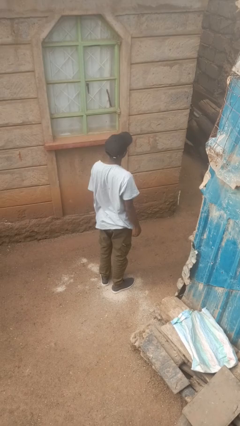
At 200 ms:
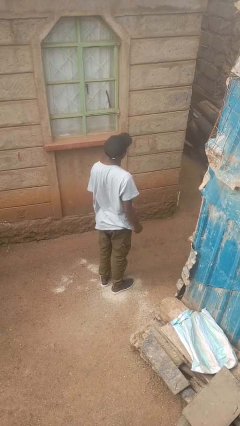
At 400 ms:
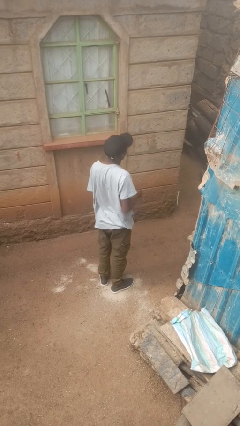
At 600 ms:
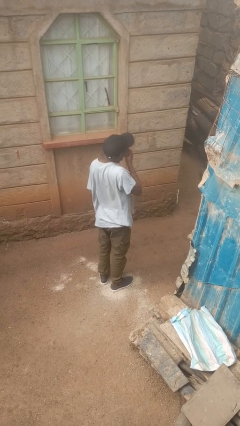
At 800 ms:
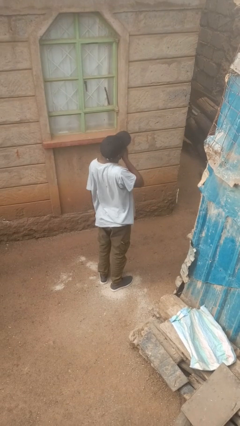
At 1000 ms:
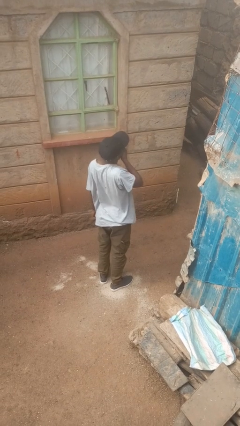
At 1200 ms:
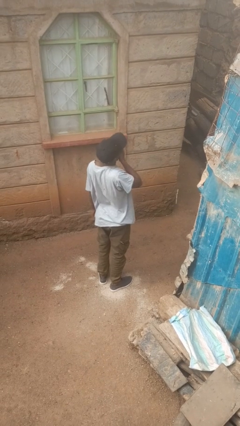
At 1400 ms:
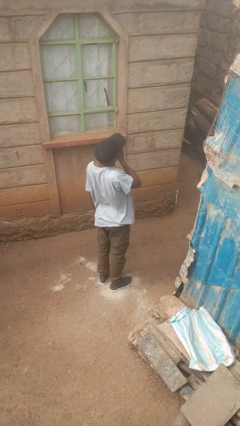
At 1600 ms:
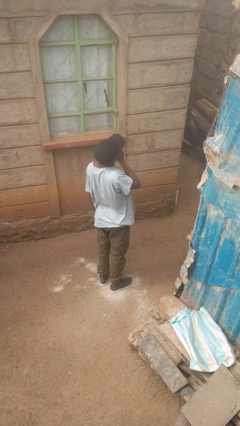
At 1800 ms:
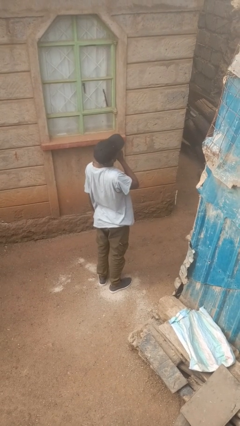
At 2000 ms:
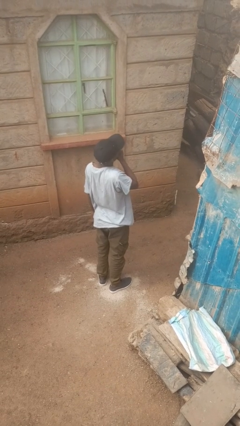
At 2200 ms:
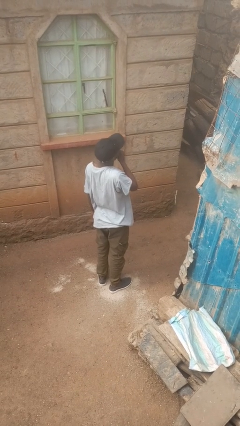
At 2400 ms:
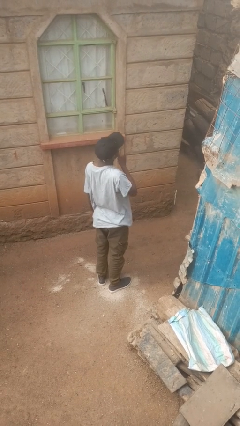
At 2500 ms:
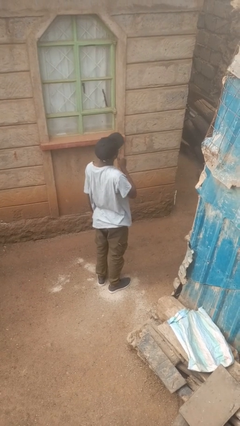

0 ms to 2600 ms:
person yawns

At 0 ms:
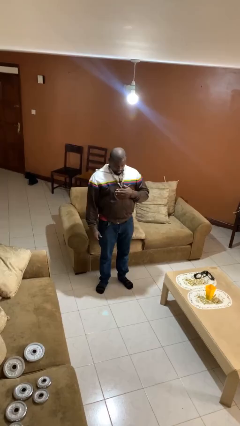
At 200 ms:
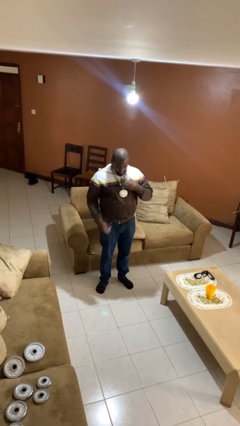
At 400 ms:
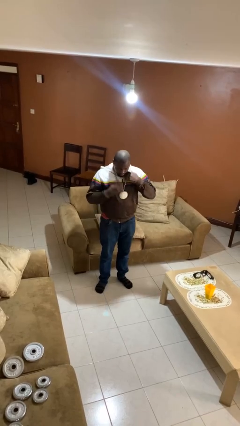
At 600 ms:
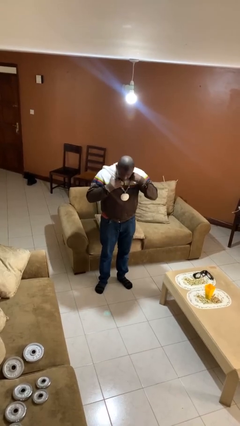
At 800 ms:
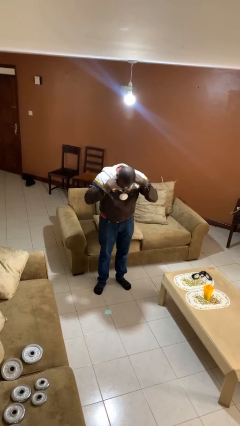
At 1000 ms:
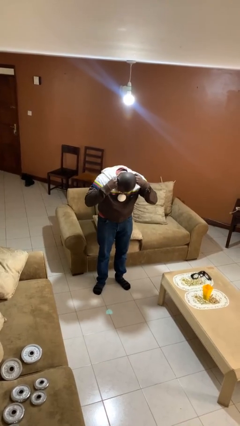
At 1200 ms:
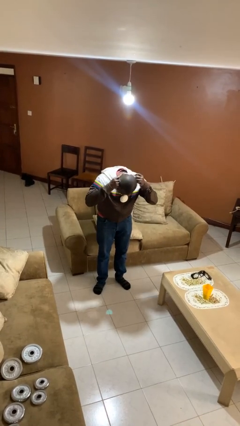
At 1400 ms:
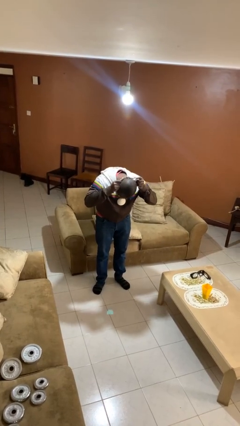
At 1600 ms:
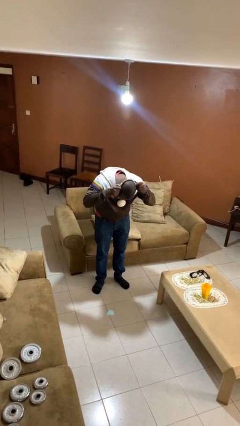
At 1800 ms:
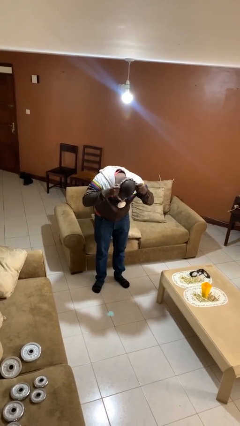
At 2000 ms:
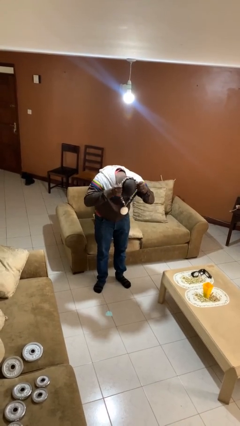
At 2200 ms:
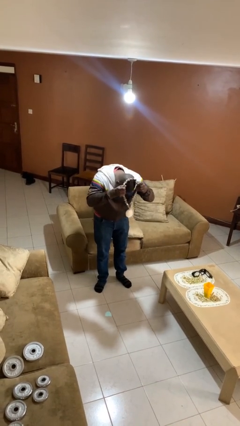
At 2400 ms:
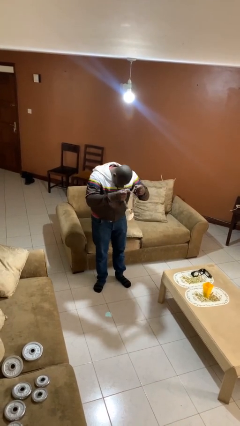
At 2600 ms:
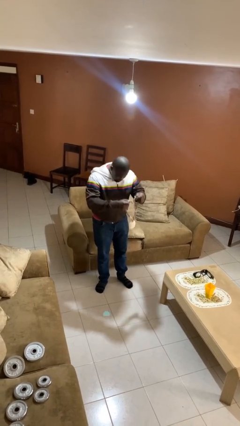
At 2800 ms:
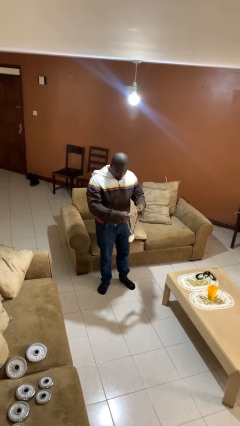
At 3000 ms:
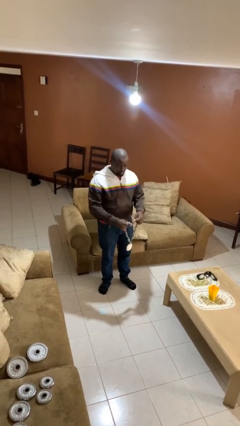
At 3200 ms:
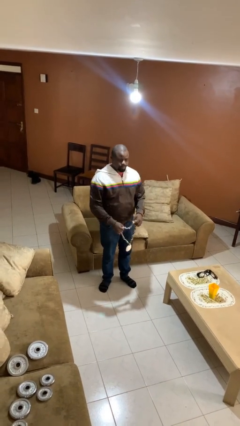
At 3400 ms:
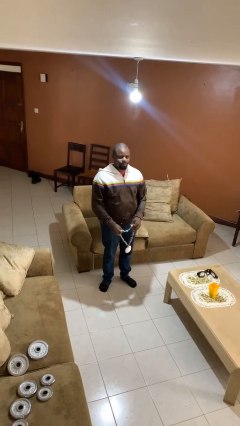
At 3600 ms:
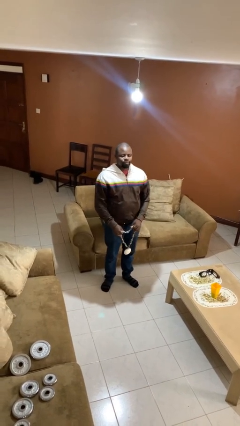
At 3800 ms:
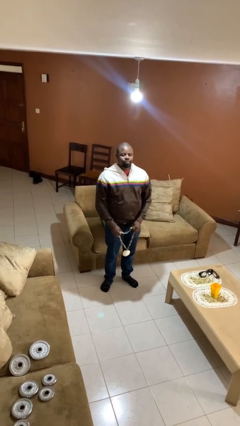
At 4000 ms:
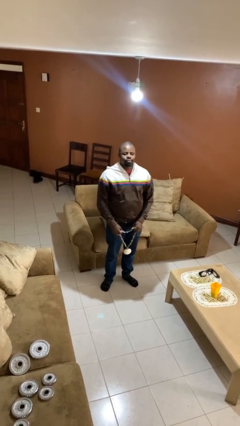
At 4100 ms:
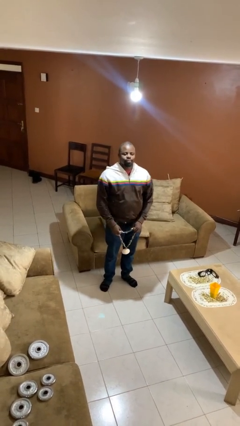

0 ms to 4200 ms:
person takes off necklace

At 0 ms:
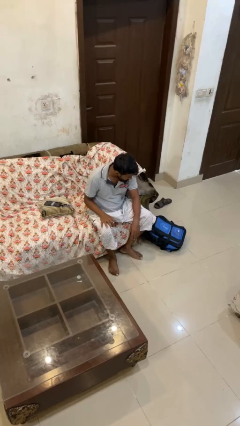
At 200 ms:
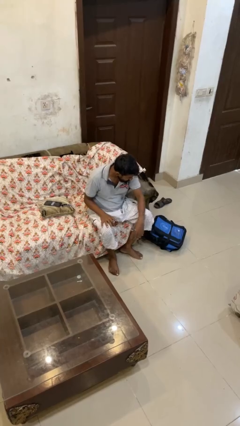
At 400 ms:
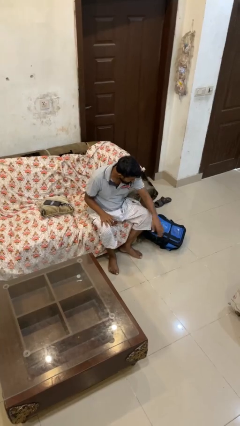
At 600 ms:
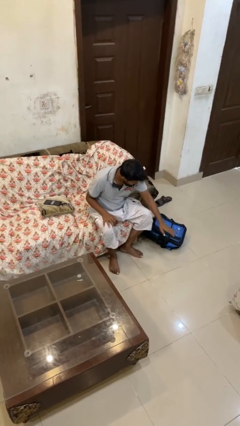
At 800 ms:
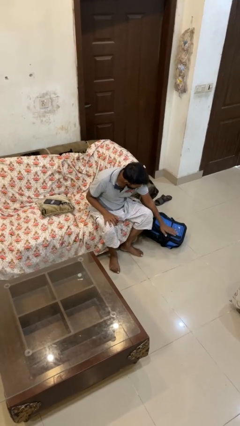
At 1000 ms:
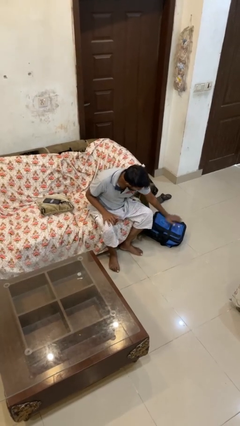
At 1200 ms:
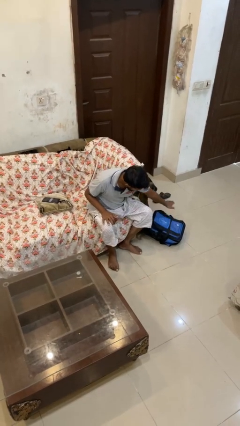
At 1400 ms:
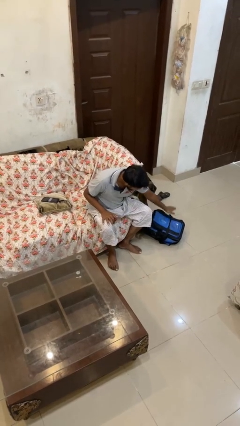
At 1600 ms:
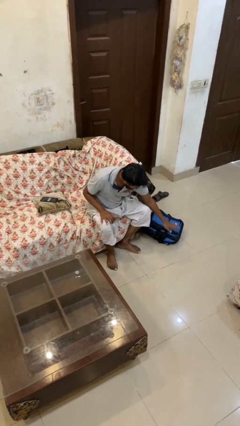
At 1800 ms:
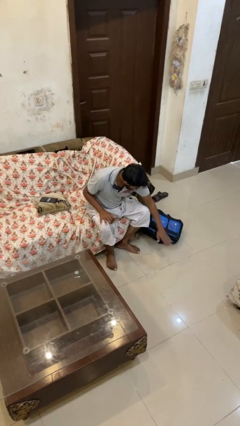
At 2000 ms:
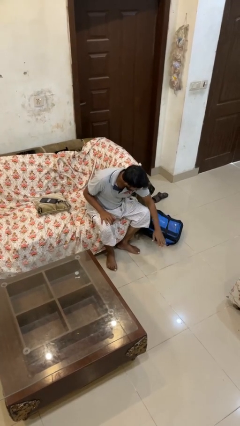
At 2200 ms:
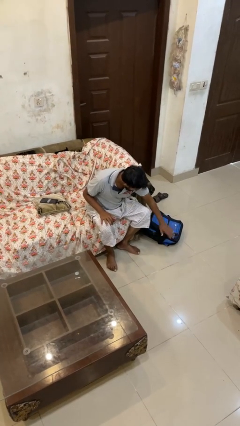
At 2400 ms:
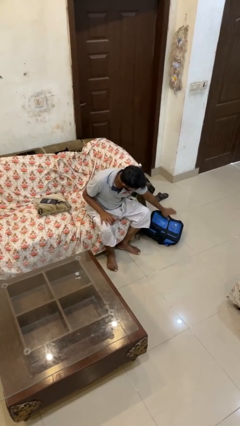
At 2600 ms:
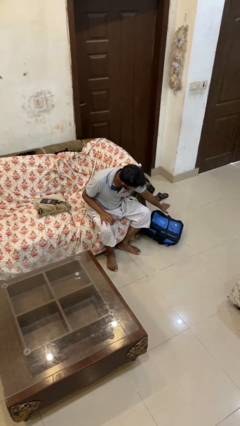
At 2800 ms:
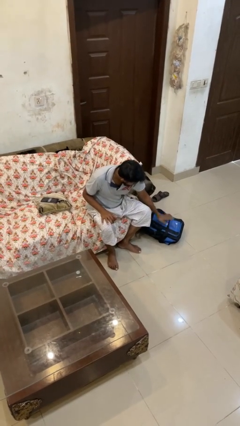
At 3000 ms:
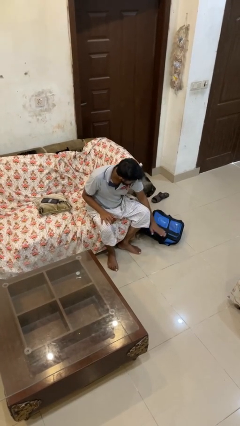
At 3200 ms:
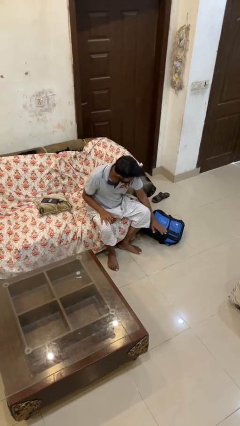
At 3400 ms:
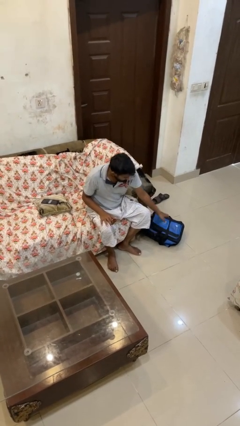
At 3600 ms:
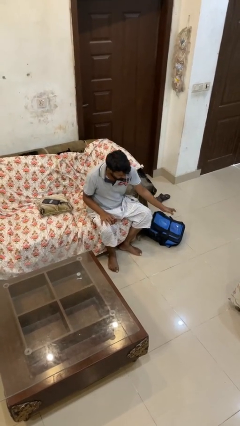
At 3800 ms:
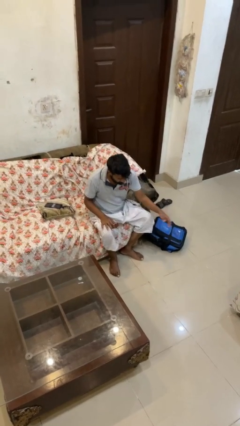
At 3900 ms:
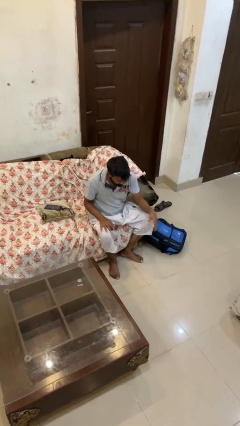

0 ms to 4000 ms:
person waves hand over object

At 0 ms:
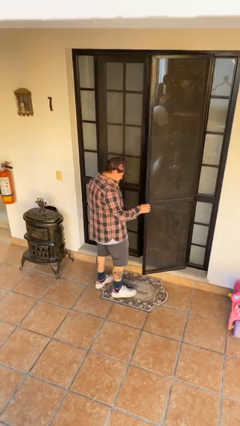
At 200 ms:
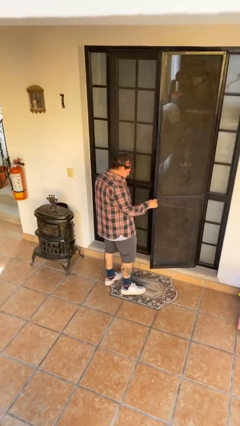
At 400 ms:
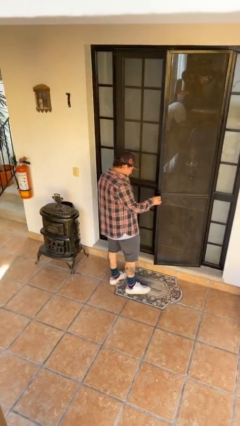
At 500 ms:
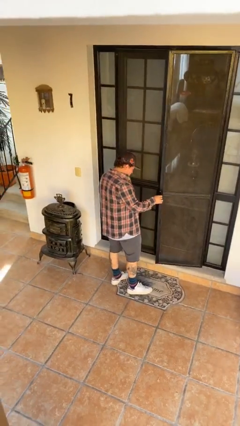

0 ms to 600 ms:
person closes facility door

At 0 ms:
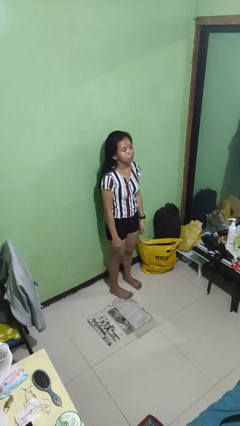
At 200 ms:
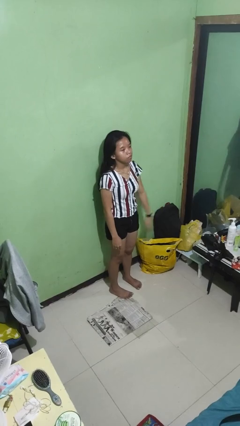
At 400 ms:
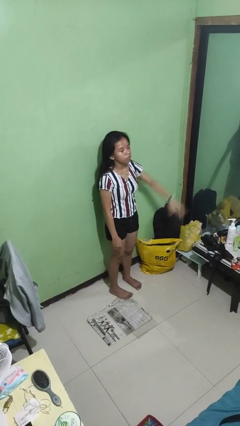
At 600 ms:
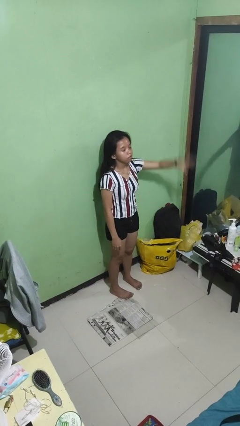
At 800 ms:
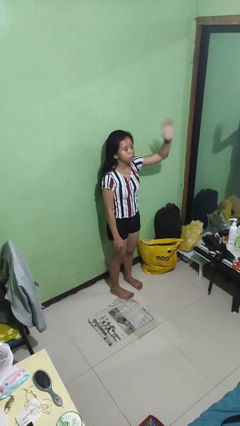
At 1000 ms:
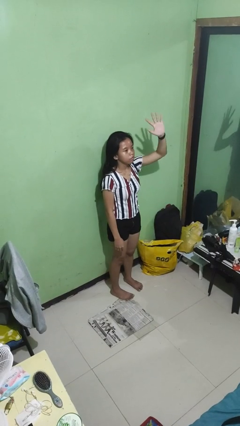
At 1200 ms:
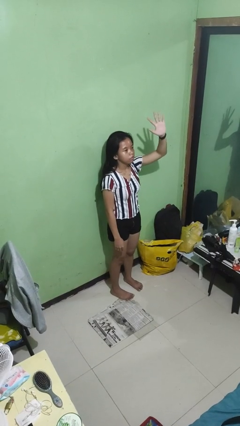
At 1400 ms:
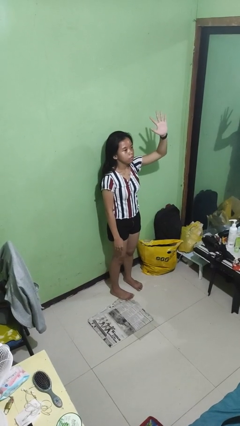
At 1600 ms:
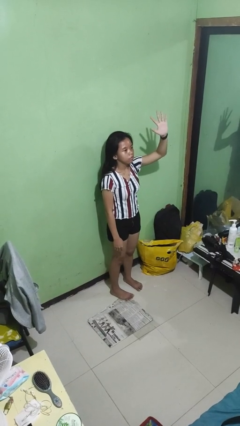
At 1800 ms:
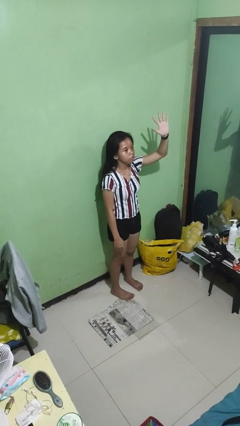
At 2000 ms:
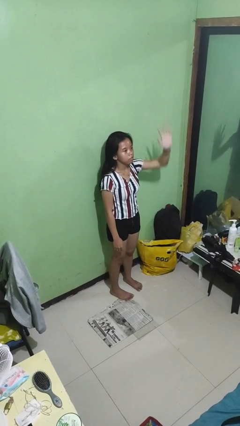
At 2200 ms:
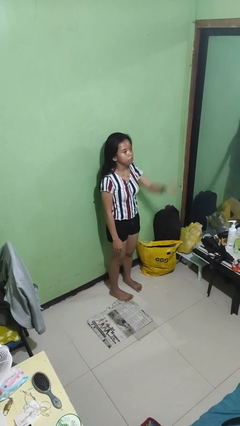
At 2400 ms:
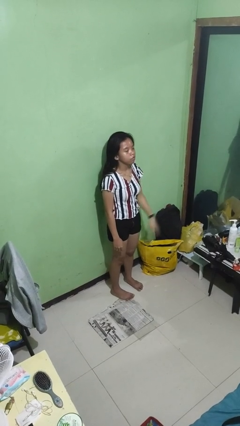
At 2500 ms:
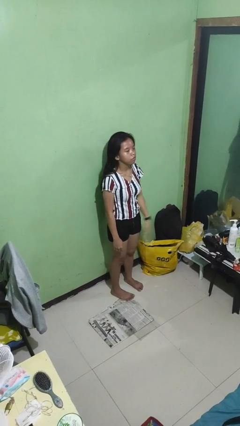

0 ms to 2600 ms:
person gestures number five

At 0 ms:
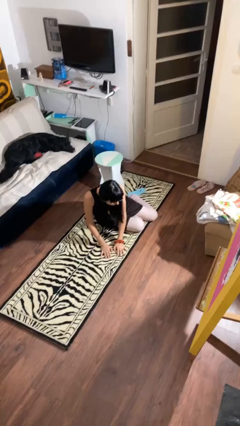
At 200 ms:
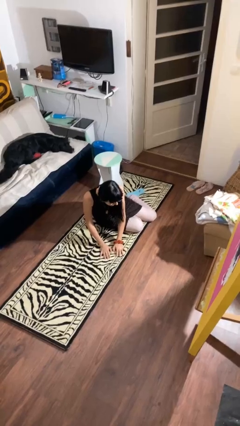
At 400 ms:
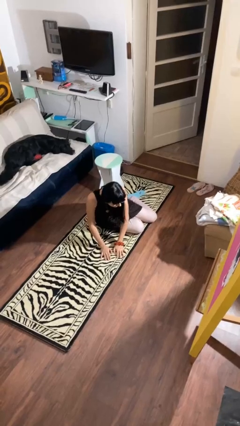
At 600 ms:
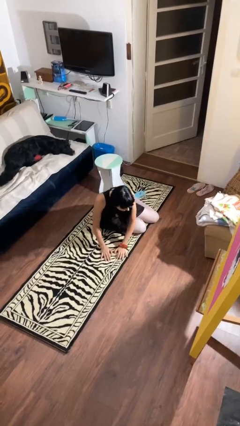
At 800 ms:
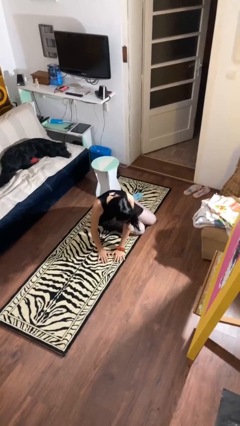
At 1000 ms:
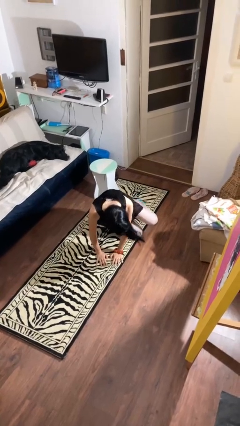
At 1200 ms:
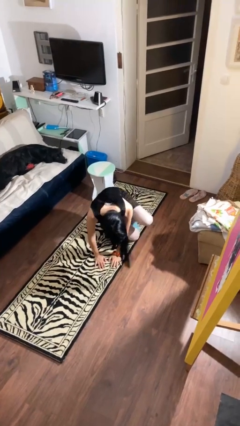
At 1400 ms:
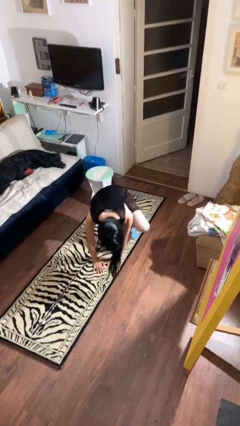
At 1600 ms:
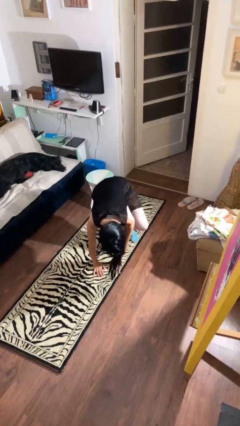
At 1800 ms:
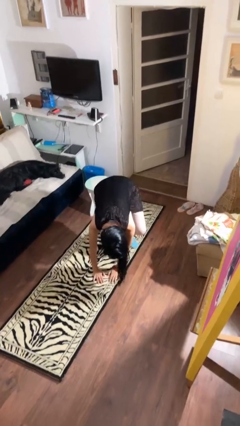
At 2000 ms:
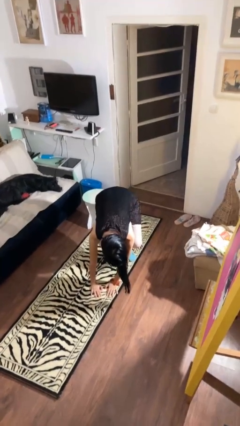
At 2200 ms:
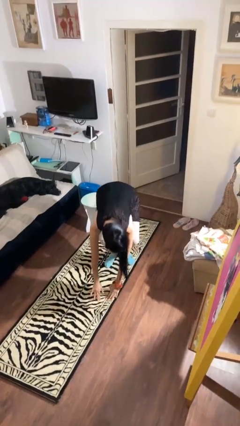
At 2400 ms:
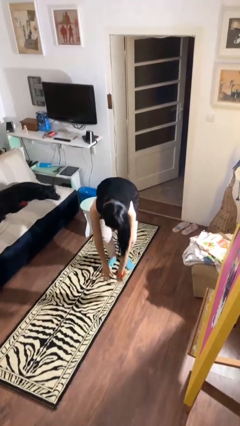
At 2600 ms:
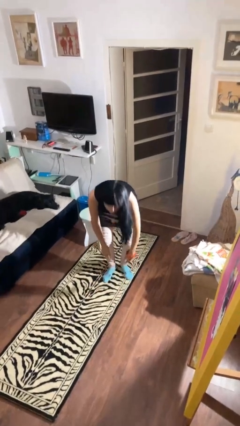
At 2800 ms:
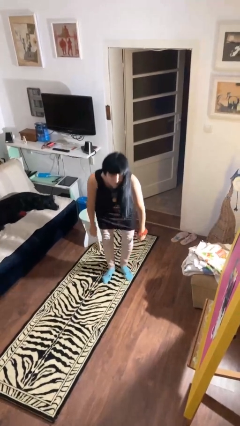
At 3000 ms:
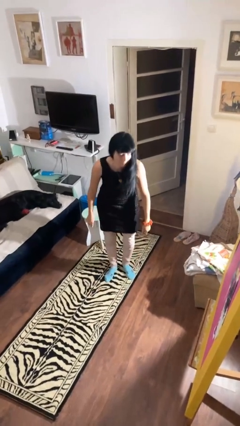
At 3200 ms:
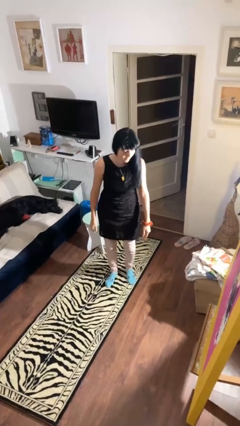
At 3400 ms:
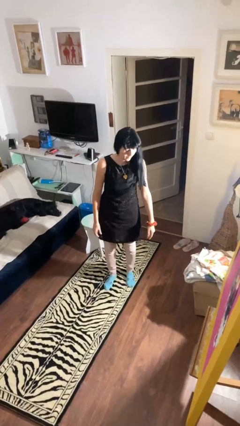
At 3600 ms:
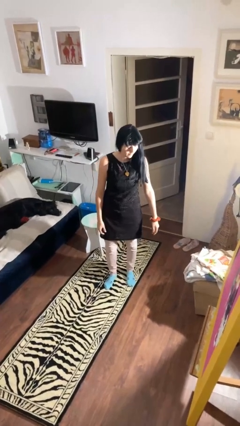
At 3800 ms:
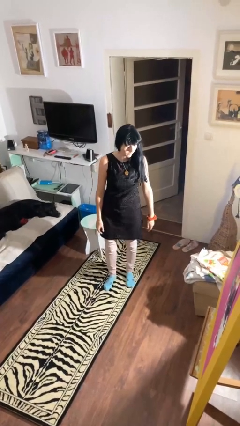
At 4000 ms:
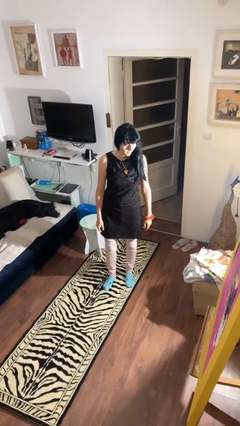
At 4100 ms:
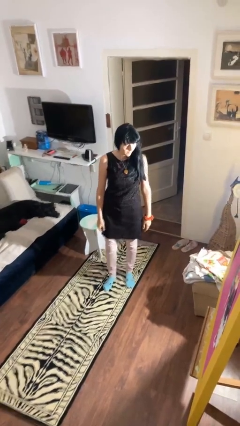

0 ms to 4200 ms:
person stands up from floor
